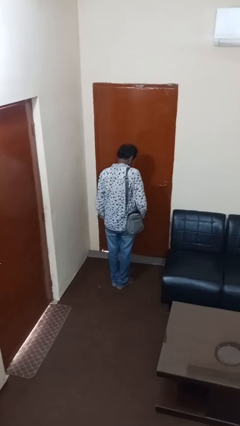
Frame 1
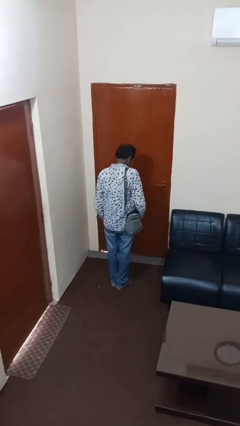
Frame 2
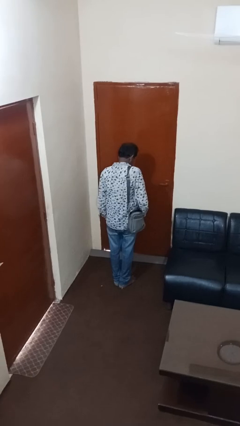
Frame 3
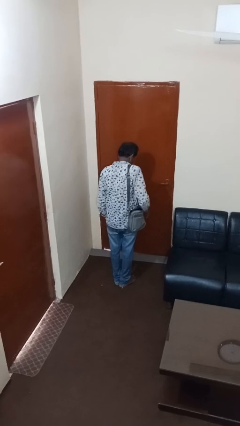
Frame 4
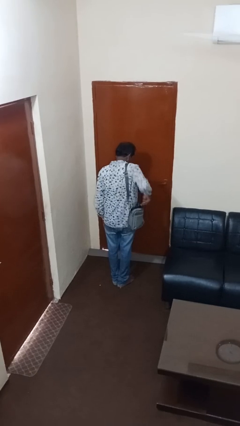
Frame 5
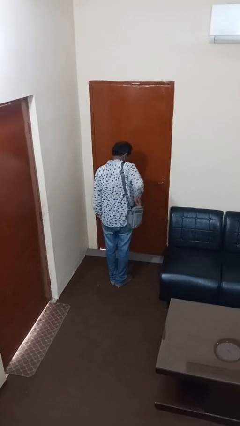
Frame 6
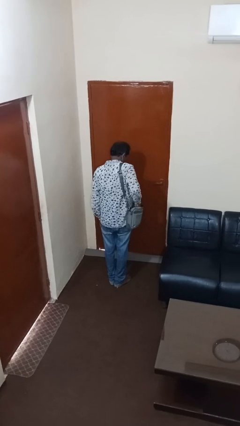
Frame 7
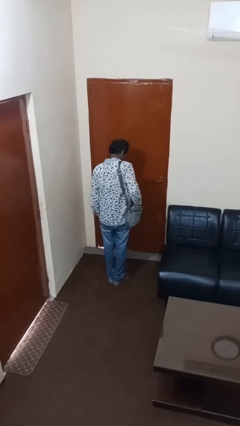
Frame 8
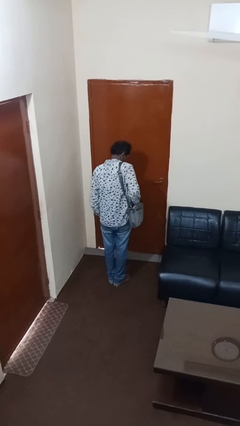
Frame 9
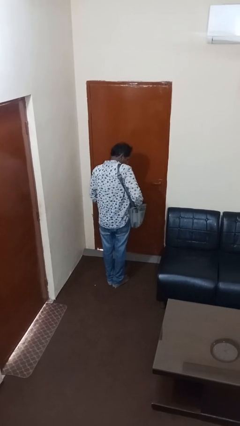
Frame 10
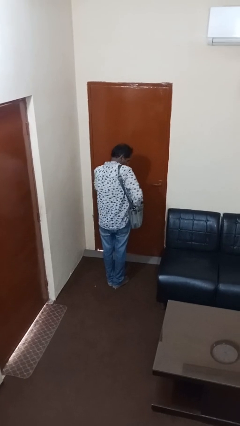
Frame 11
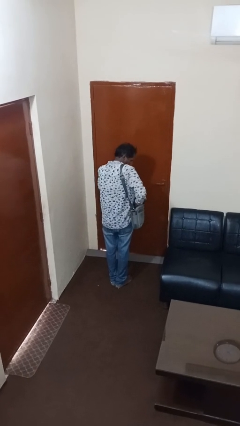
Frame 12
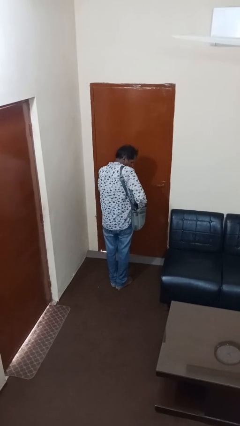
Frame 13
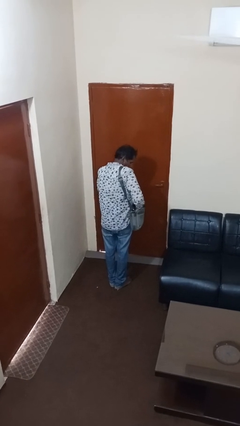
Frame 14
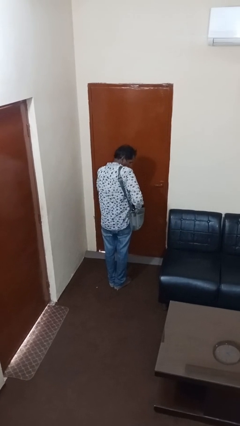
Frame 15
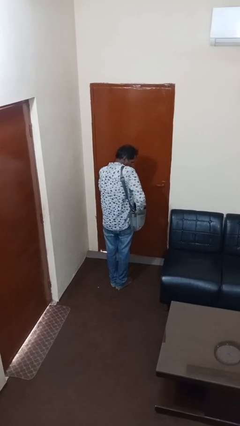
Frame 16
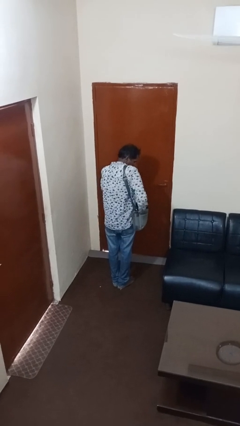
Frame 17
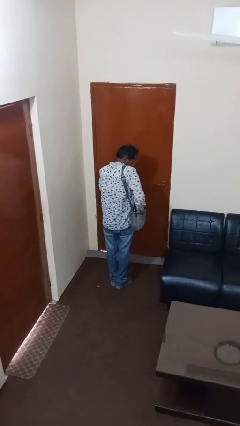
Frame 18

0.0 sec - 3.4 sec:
person searches in purse

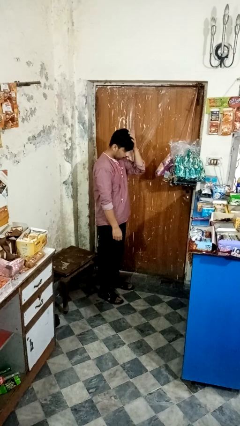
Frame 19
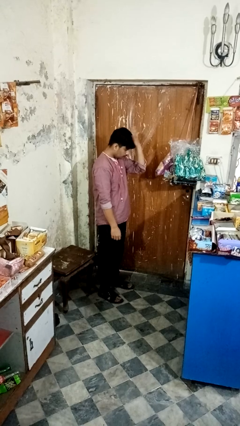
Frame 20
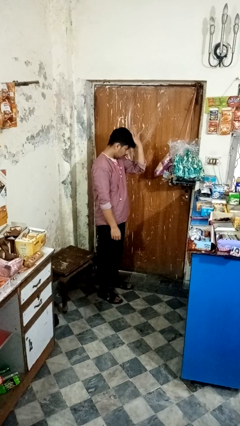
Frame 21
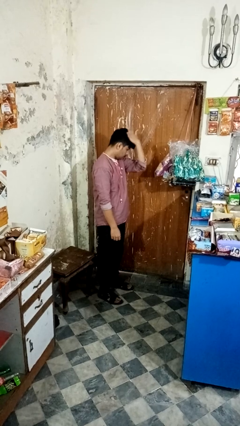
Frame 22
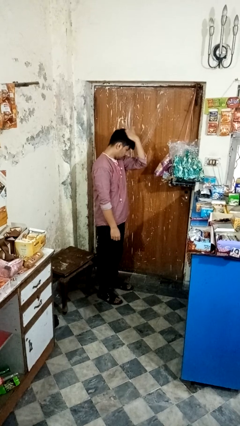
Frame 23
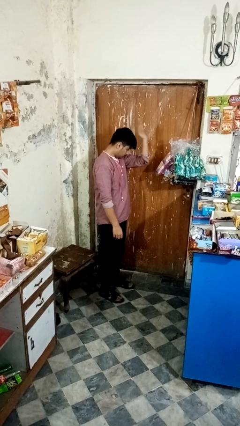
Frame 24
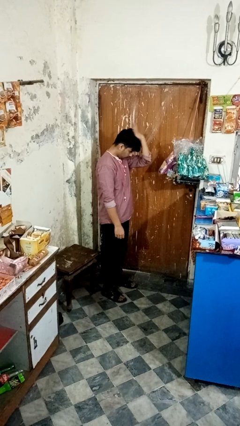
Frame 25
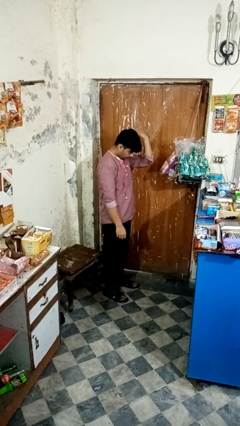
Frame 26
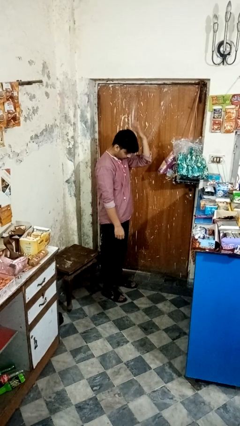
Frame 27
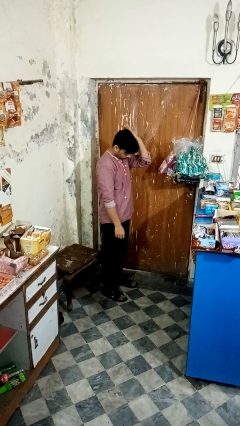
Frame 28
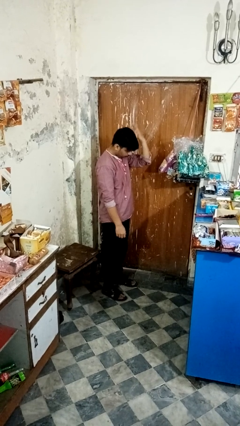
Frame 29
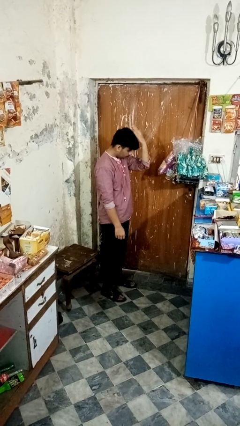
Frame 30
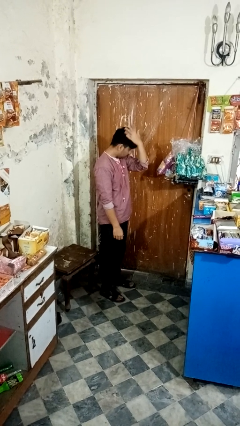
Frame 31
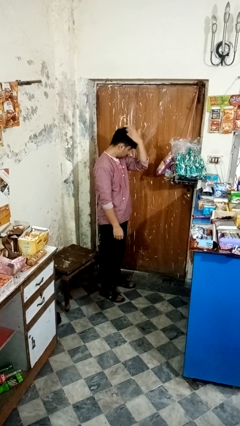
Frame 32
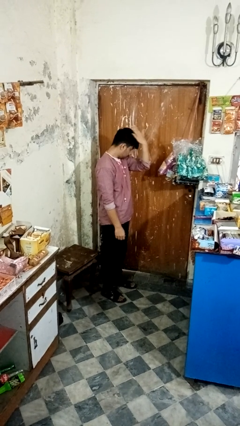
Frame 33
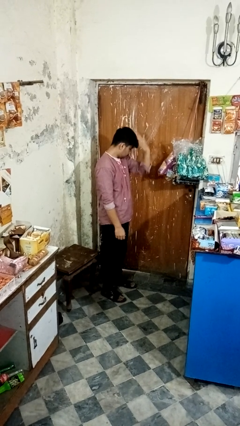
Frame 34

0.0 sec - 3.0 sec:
person pats head

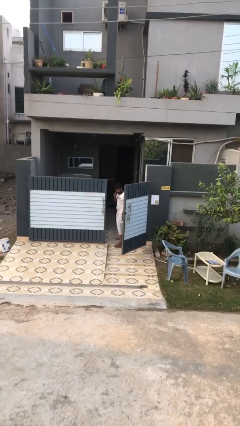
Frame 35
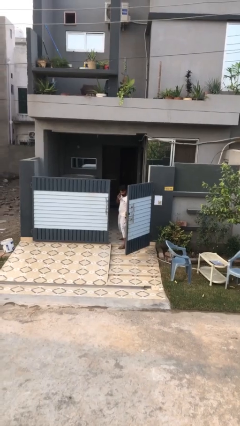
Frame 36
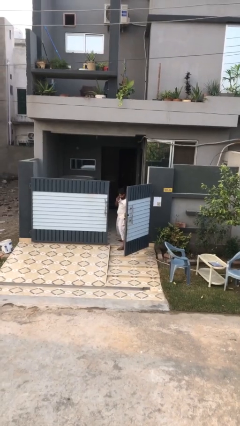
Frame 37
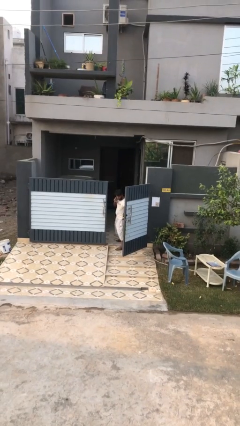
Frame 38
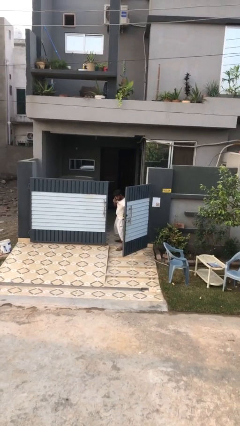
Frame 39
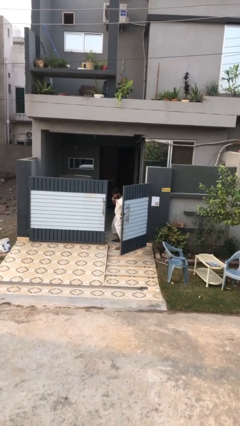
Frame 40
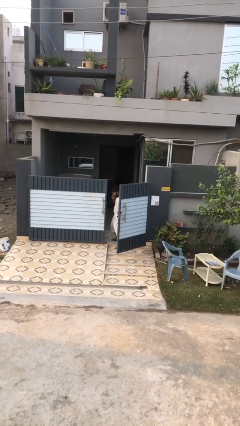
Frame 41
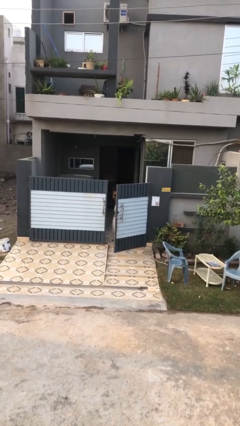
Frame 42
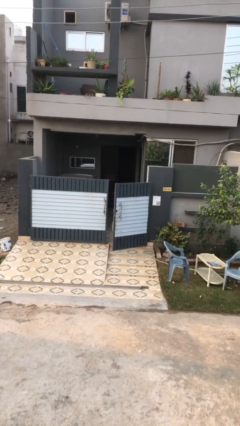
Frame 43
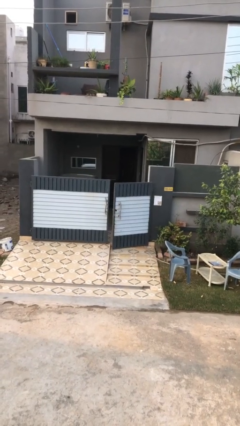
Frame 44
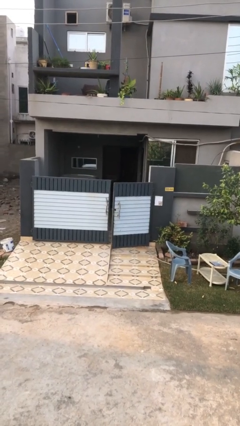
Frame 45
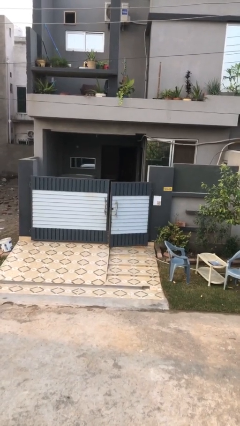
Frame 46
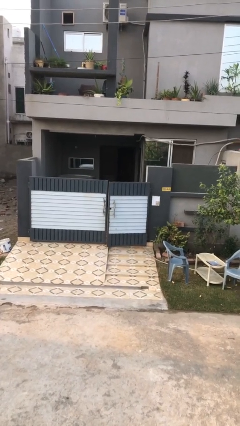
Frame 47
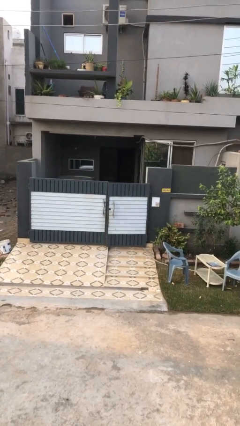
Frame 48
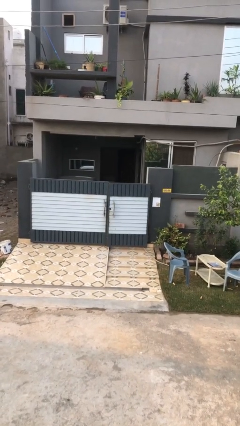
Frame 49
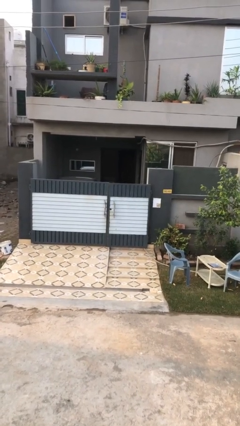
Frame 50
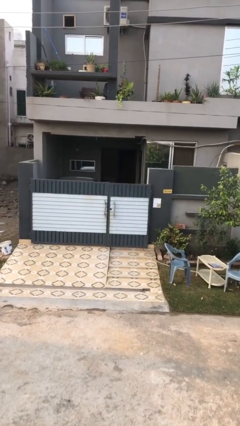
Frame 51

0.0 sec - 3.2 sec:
person closes facility door

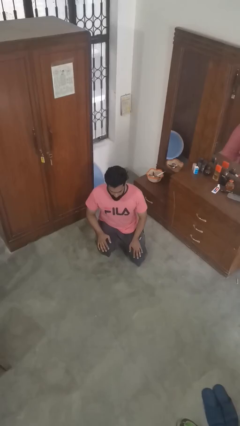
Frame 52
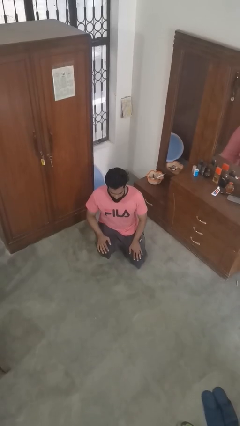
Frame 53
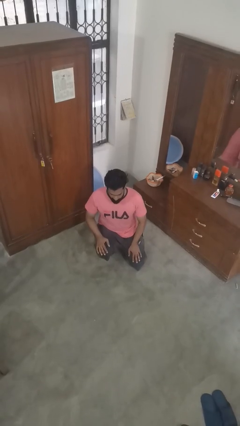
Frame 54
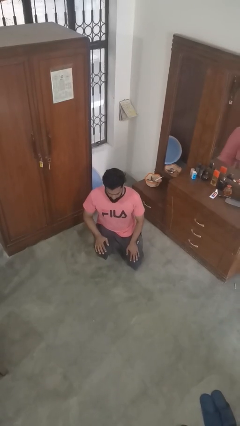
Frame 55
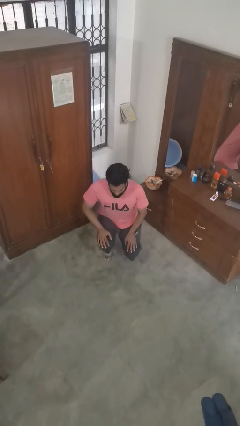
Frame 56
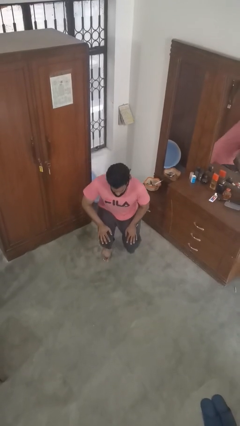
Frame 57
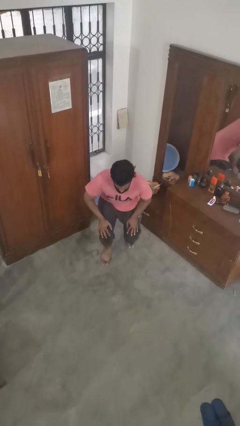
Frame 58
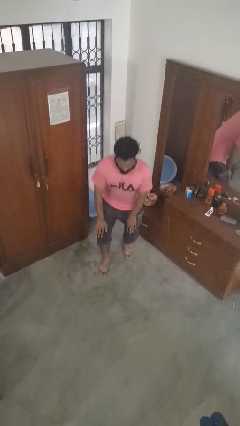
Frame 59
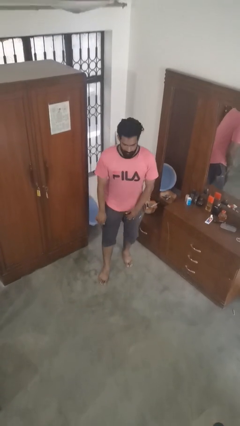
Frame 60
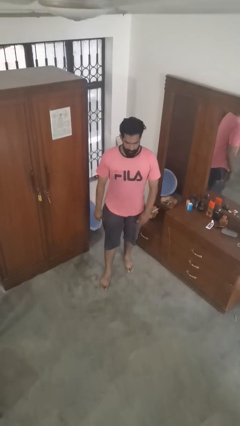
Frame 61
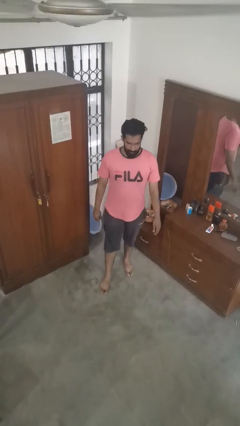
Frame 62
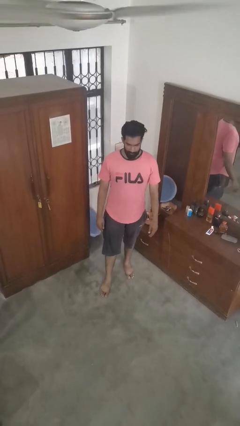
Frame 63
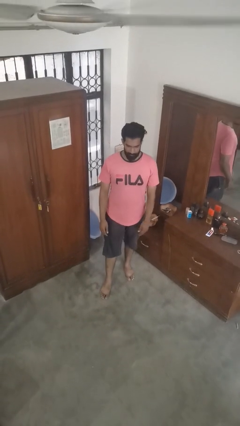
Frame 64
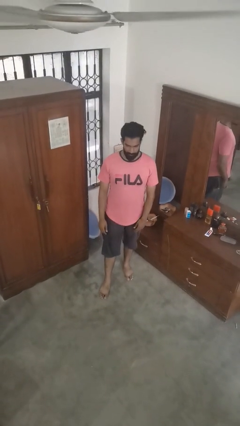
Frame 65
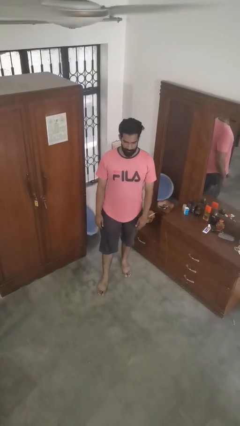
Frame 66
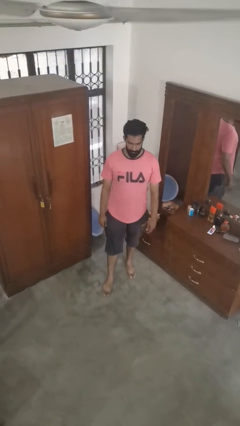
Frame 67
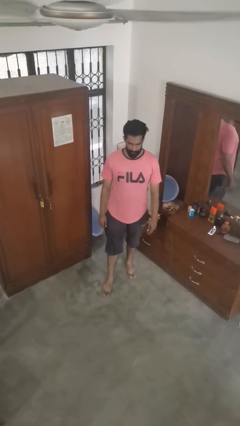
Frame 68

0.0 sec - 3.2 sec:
person stands up from floor

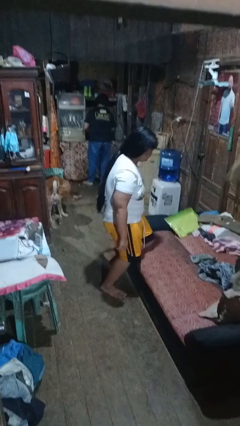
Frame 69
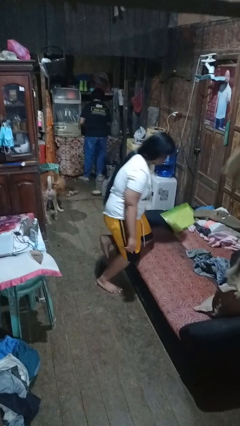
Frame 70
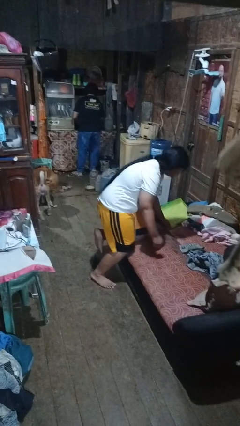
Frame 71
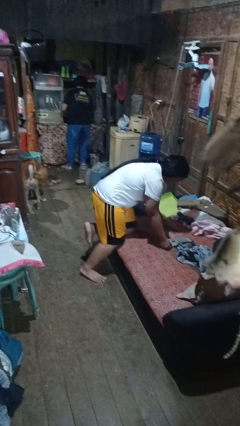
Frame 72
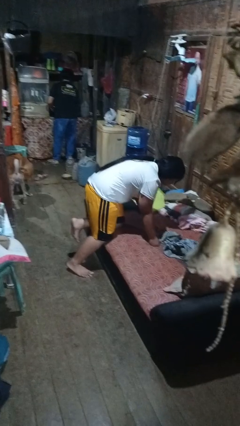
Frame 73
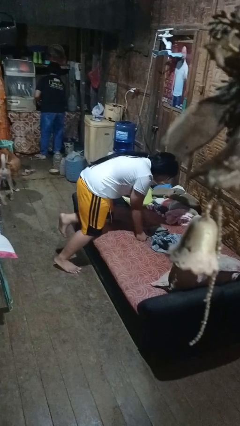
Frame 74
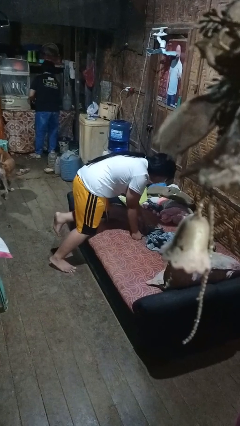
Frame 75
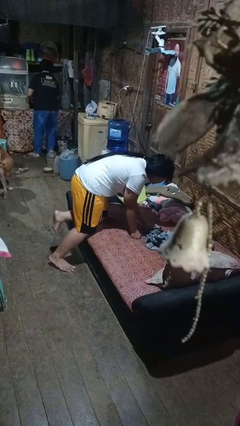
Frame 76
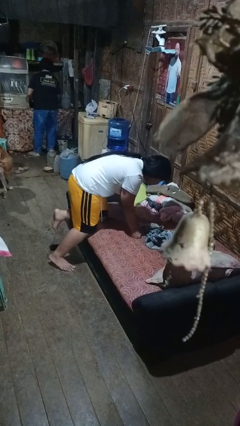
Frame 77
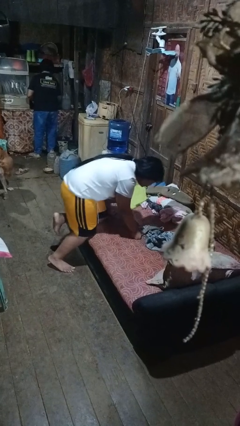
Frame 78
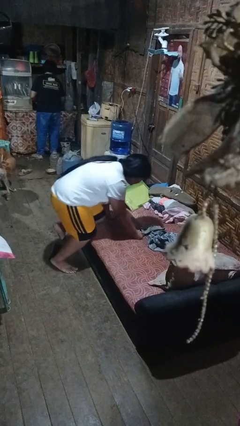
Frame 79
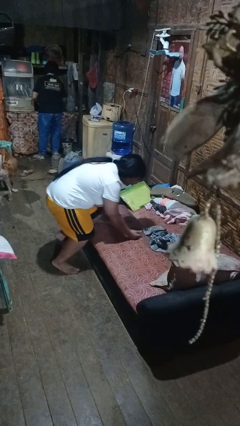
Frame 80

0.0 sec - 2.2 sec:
person searches in couch

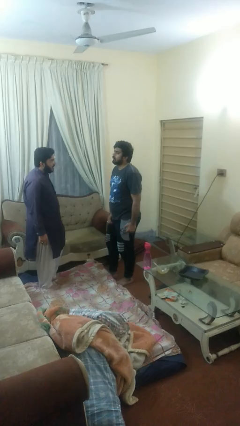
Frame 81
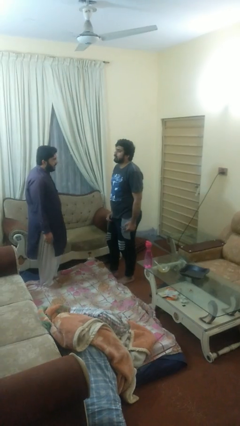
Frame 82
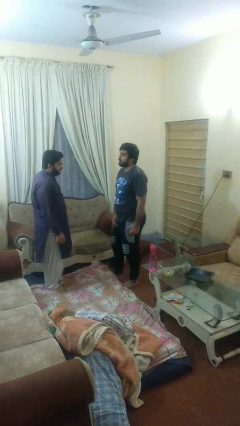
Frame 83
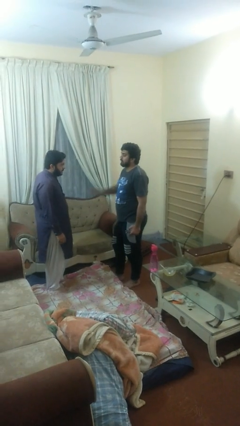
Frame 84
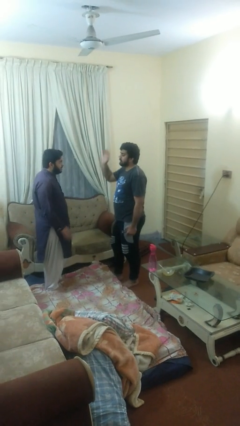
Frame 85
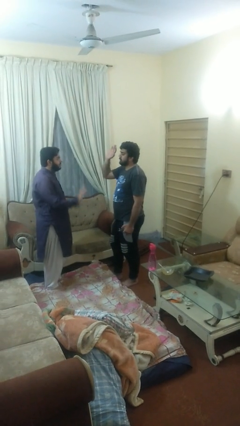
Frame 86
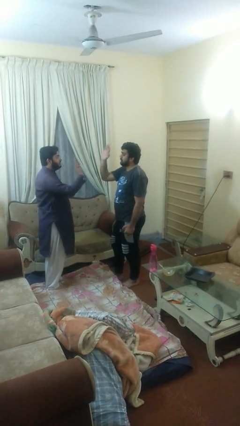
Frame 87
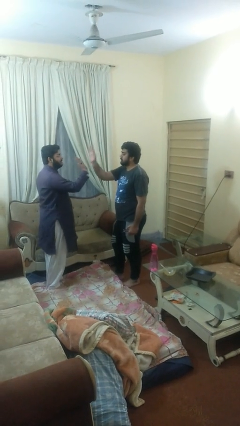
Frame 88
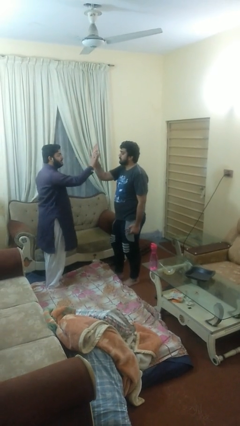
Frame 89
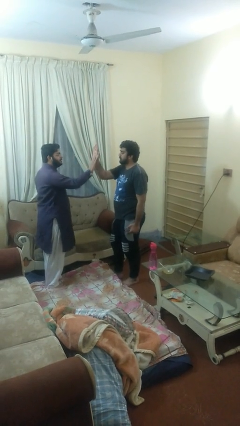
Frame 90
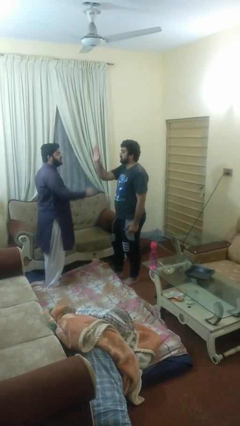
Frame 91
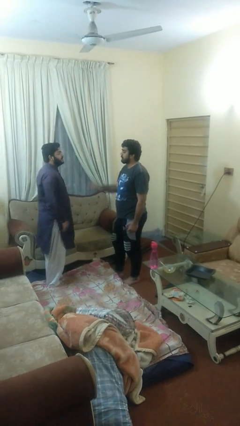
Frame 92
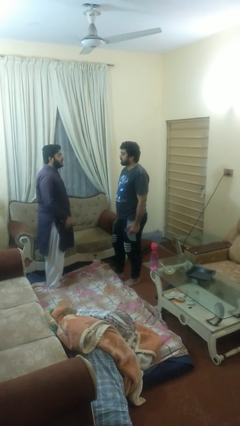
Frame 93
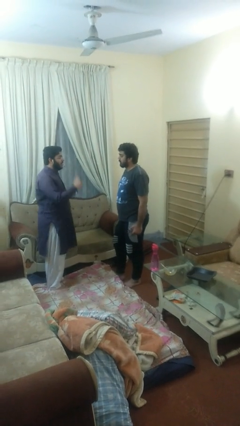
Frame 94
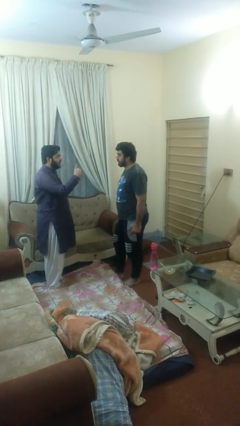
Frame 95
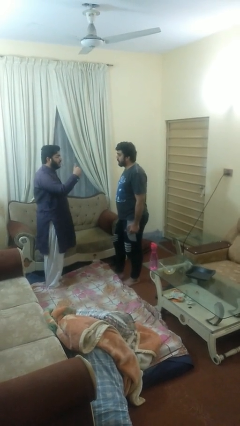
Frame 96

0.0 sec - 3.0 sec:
person highfives hand
